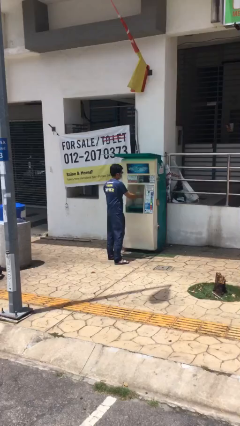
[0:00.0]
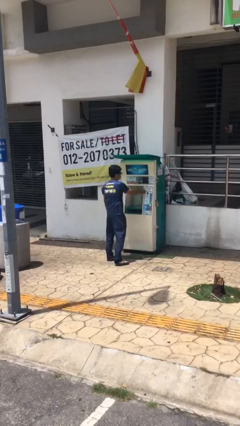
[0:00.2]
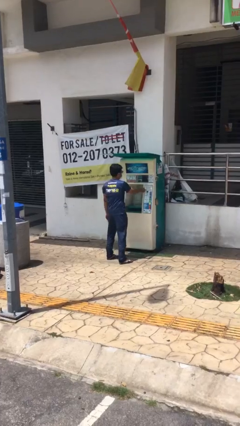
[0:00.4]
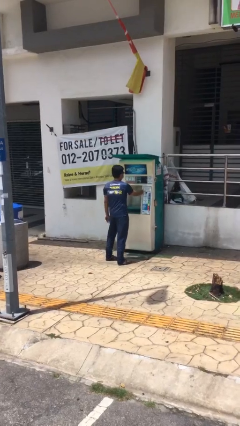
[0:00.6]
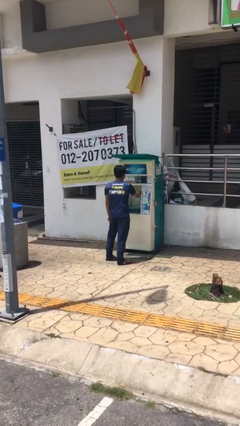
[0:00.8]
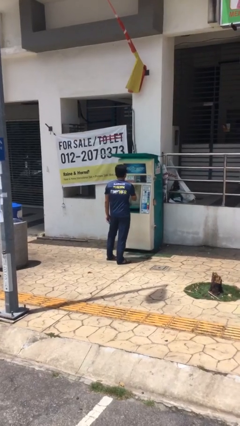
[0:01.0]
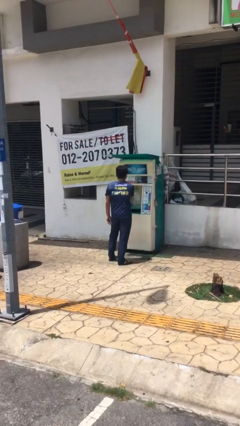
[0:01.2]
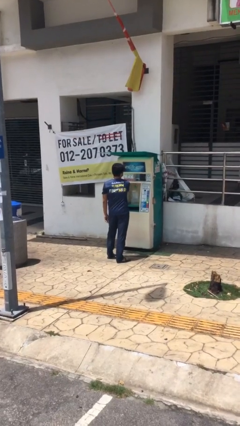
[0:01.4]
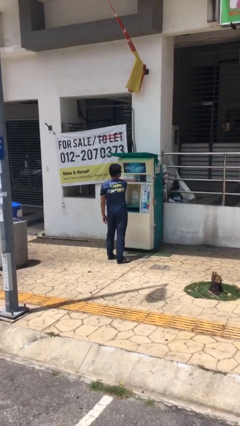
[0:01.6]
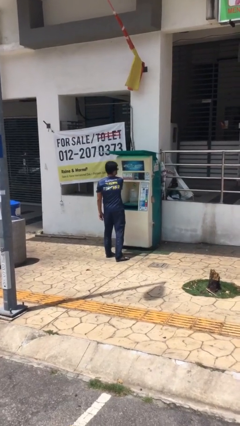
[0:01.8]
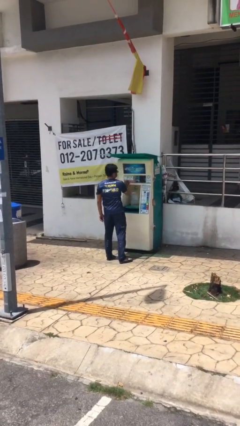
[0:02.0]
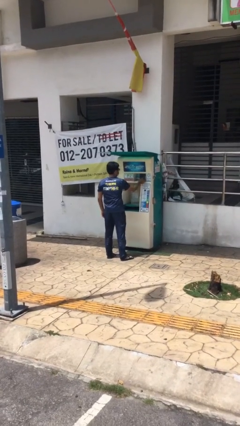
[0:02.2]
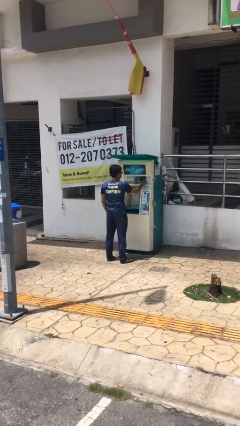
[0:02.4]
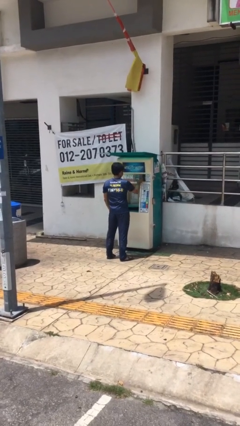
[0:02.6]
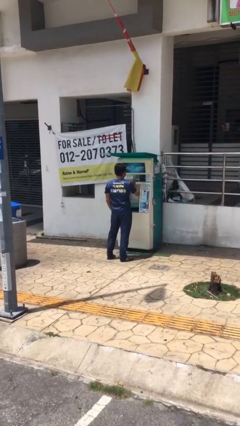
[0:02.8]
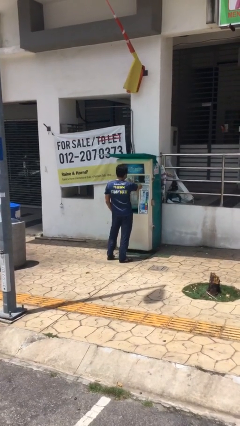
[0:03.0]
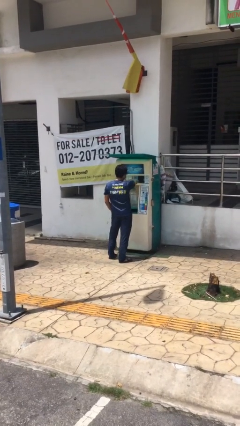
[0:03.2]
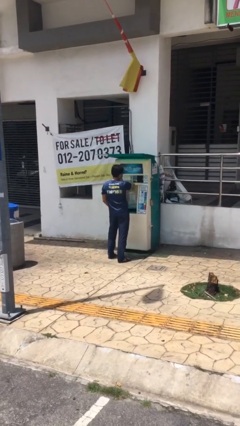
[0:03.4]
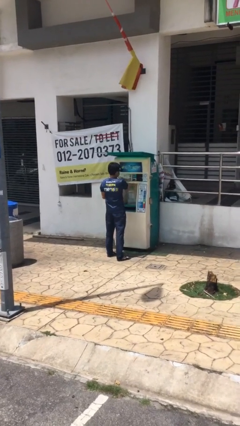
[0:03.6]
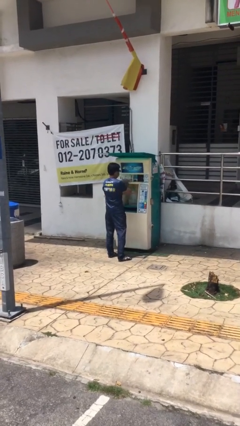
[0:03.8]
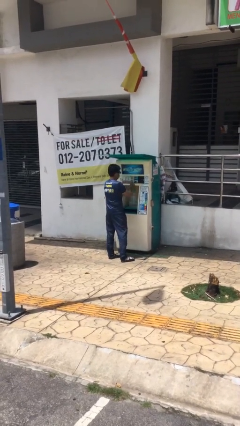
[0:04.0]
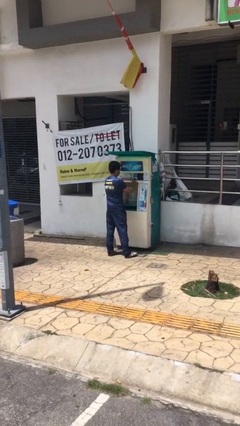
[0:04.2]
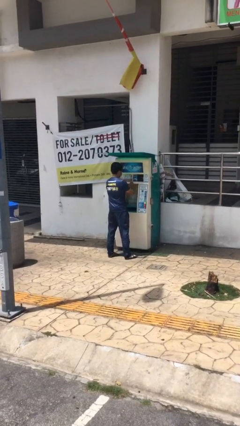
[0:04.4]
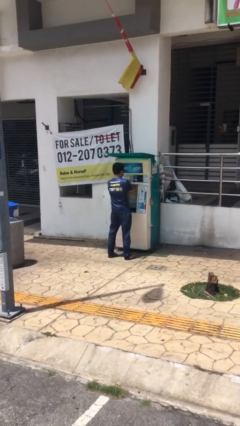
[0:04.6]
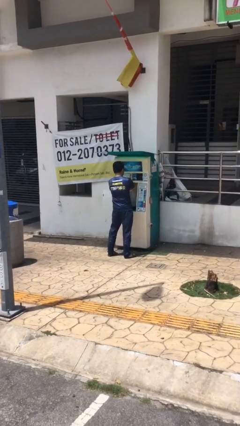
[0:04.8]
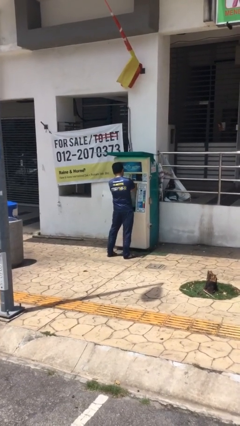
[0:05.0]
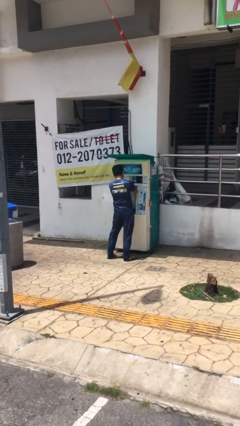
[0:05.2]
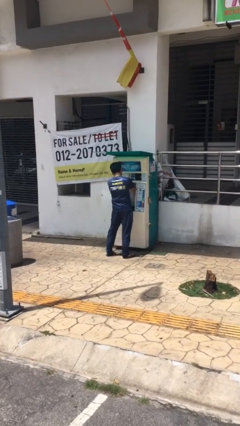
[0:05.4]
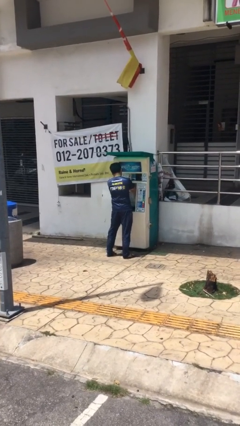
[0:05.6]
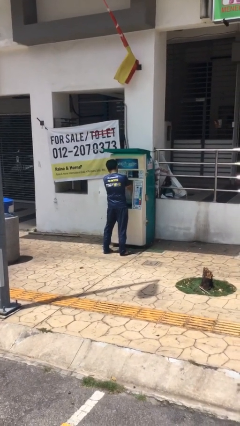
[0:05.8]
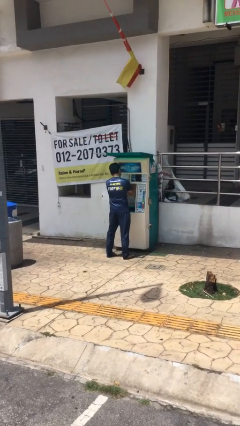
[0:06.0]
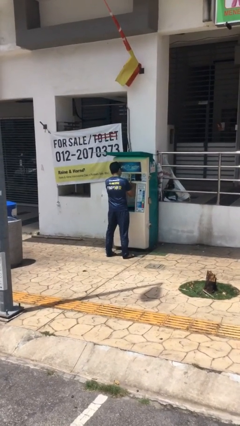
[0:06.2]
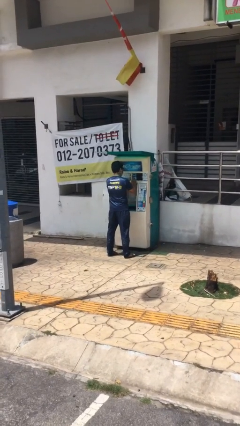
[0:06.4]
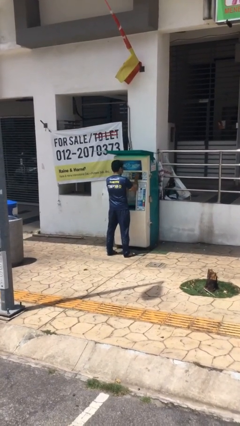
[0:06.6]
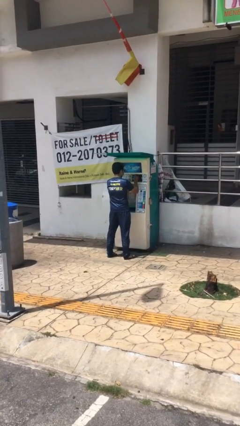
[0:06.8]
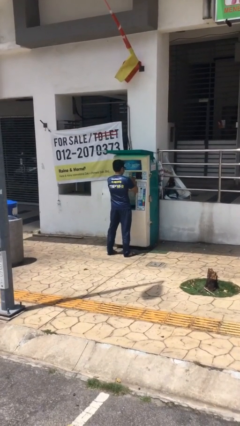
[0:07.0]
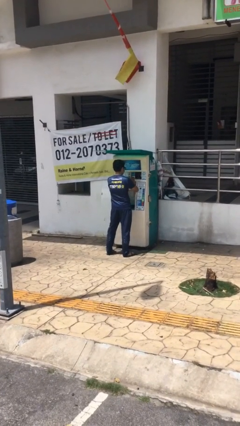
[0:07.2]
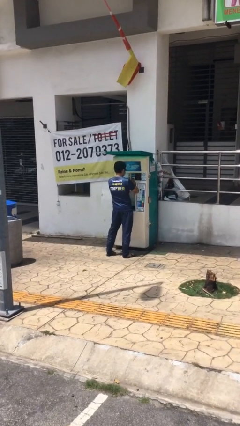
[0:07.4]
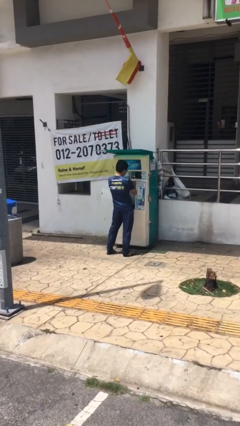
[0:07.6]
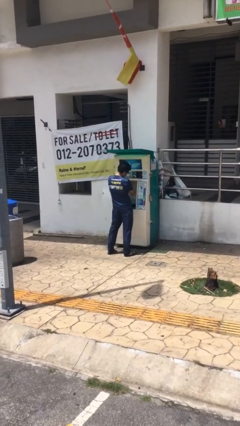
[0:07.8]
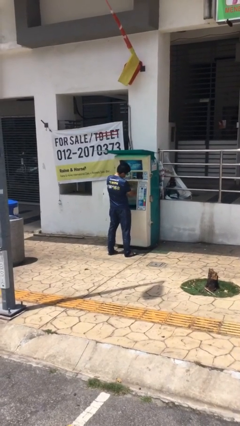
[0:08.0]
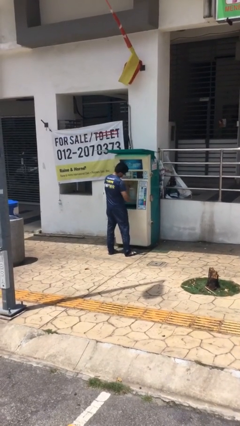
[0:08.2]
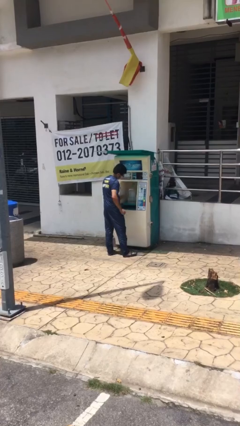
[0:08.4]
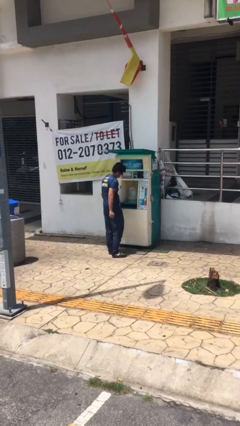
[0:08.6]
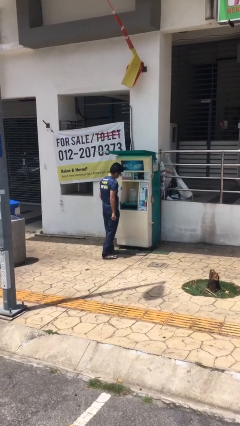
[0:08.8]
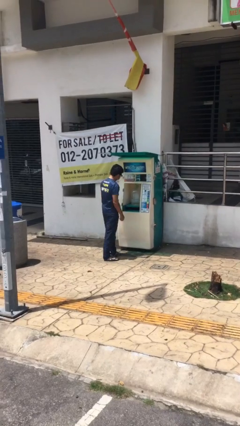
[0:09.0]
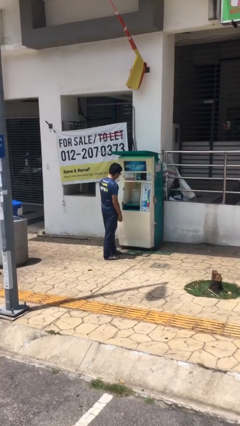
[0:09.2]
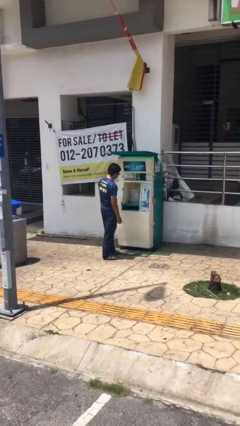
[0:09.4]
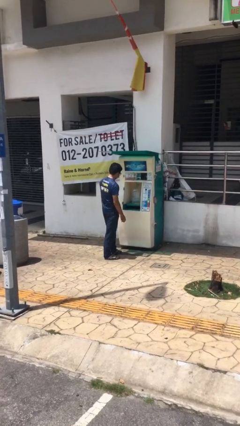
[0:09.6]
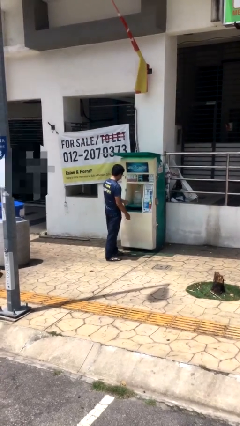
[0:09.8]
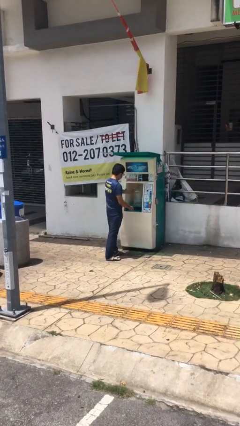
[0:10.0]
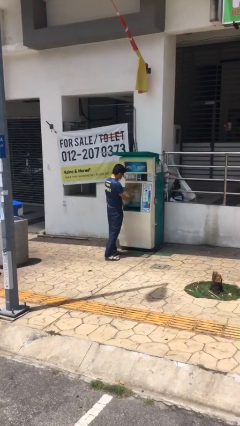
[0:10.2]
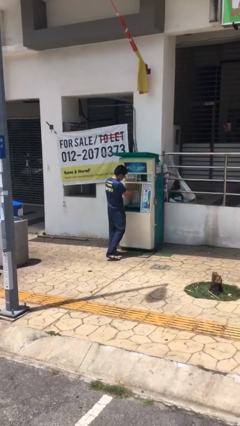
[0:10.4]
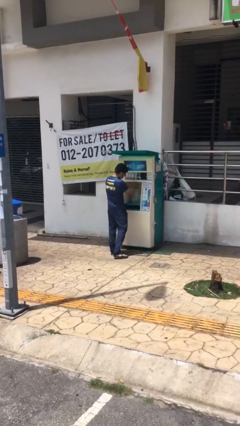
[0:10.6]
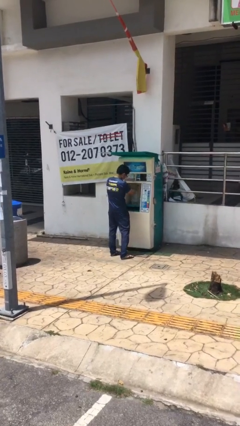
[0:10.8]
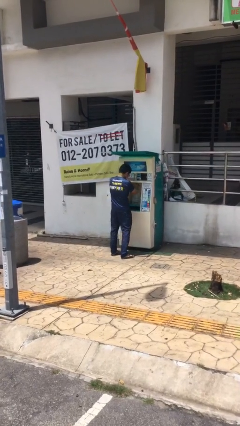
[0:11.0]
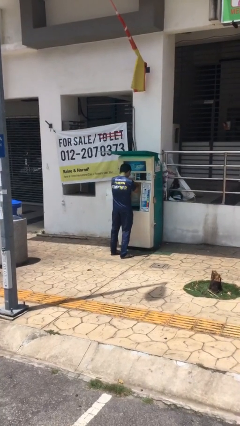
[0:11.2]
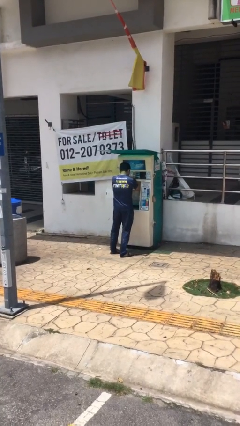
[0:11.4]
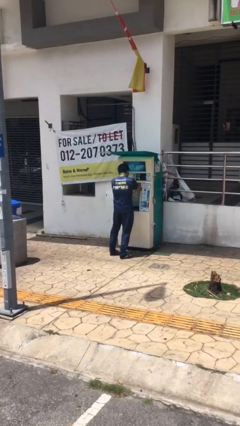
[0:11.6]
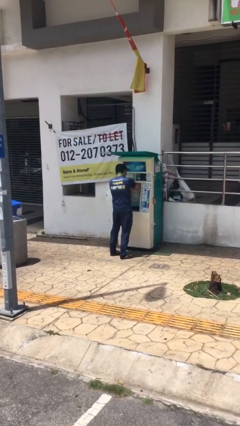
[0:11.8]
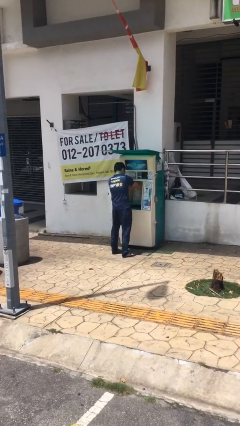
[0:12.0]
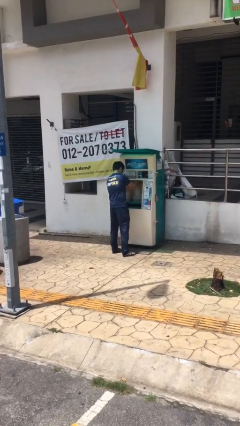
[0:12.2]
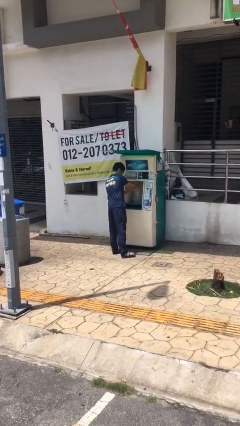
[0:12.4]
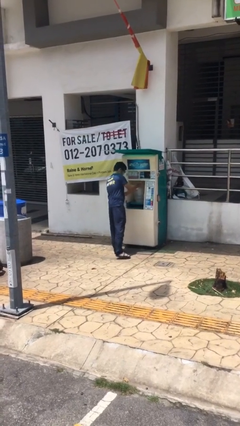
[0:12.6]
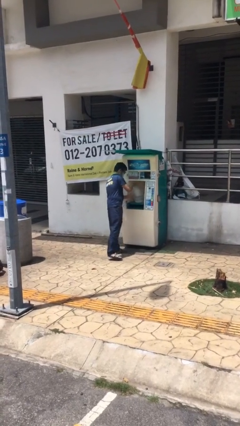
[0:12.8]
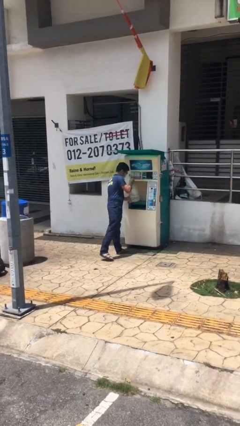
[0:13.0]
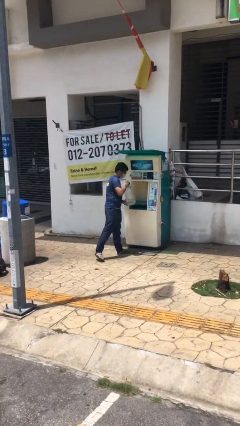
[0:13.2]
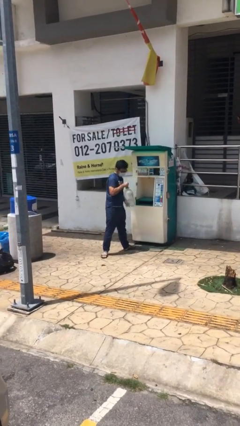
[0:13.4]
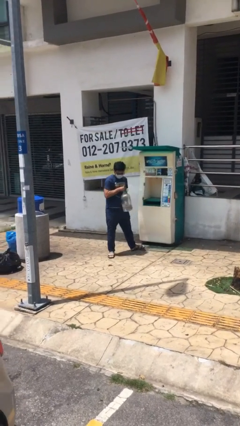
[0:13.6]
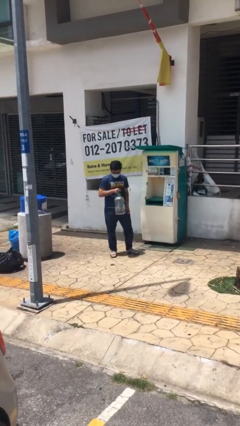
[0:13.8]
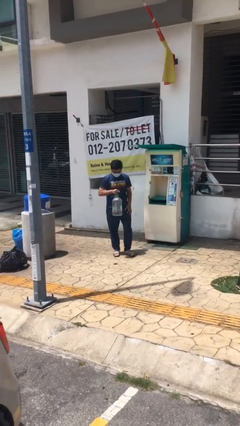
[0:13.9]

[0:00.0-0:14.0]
person purchases from machine

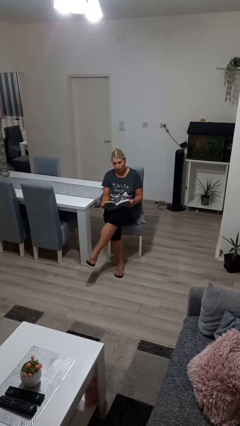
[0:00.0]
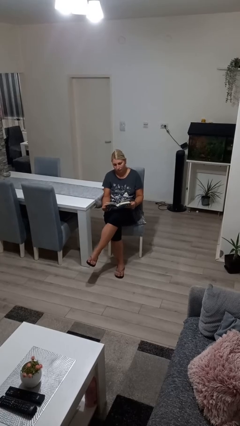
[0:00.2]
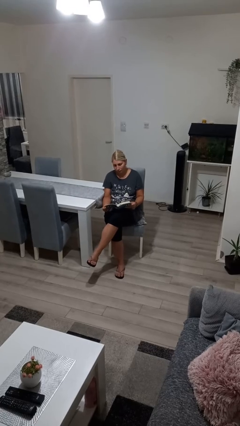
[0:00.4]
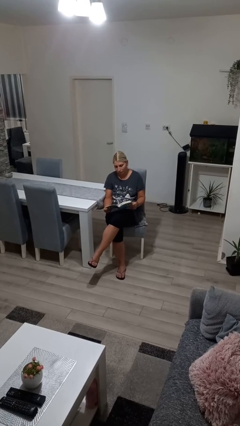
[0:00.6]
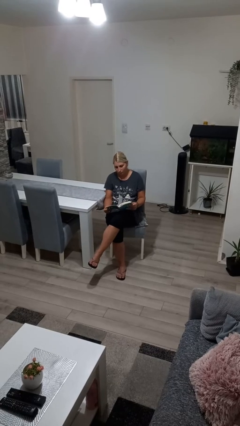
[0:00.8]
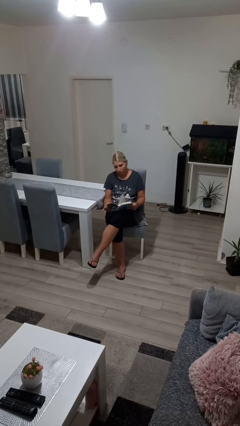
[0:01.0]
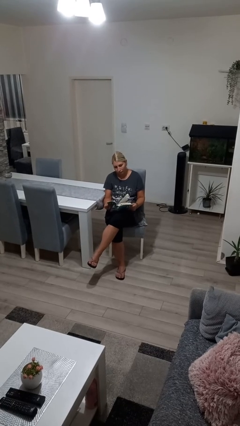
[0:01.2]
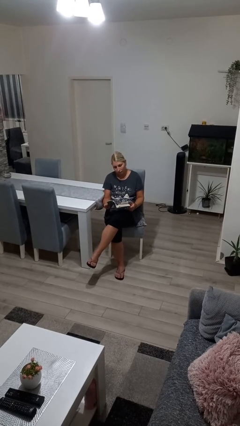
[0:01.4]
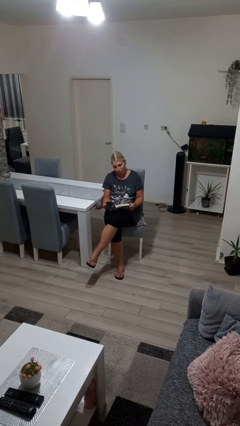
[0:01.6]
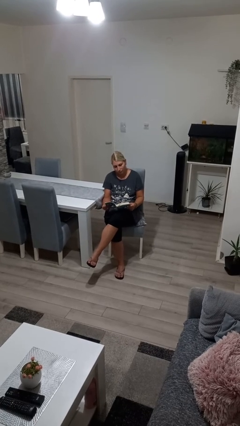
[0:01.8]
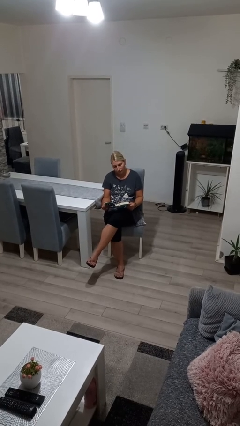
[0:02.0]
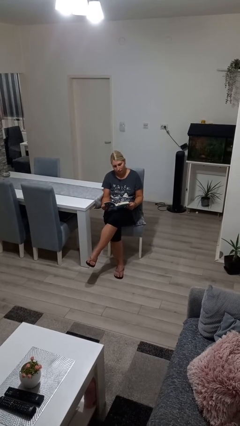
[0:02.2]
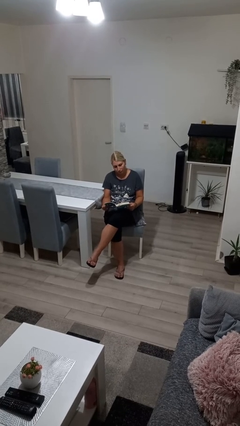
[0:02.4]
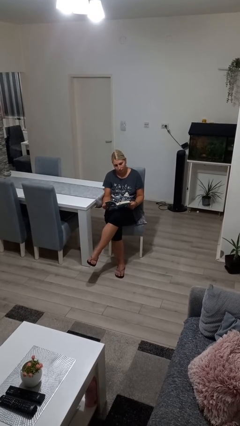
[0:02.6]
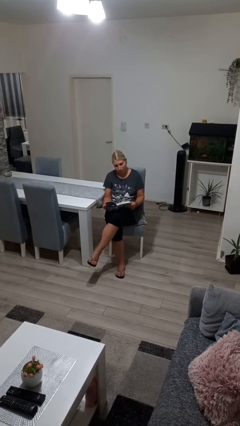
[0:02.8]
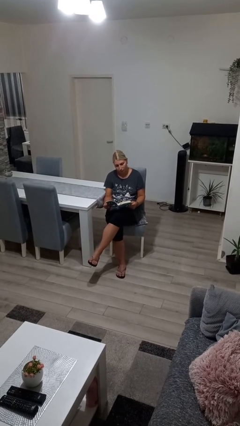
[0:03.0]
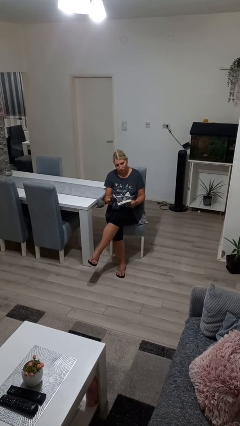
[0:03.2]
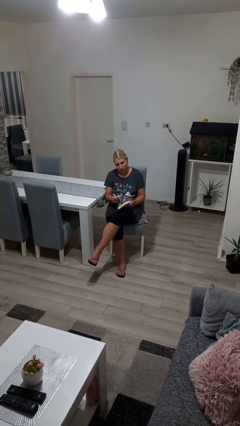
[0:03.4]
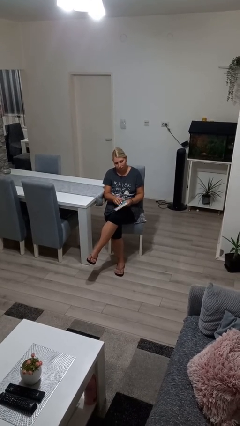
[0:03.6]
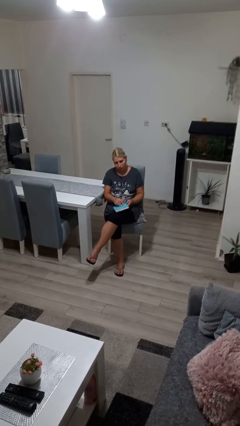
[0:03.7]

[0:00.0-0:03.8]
person reads book
